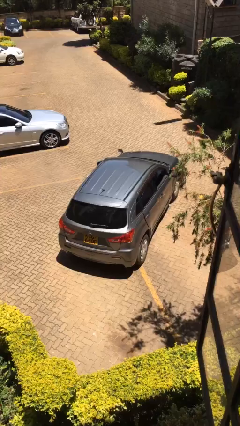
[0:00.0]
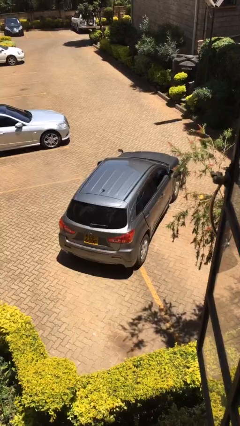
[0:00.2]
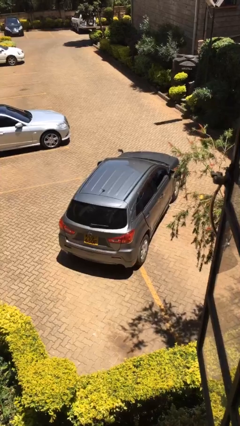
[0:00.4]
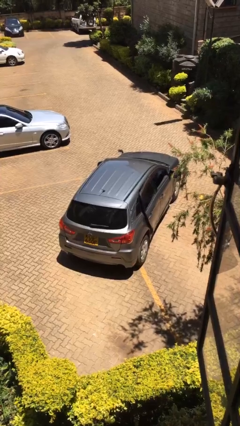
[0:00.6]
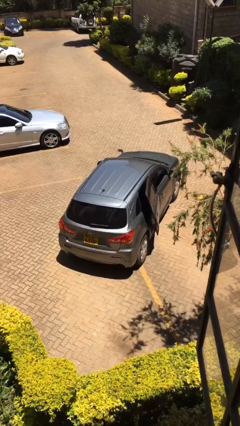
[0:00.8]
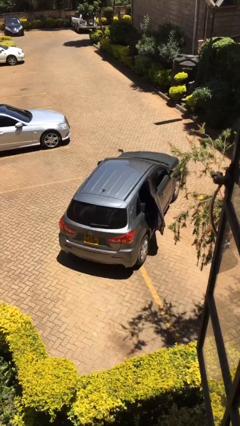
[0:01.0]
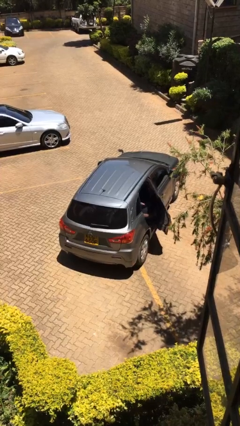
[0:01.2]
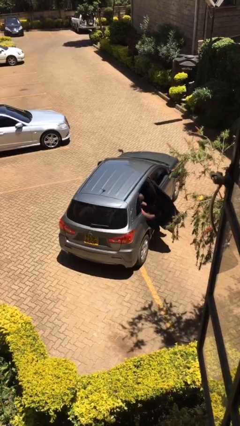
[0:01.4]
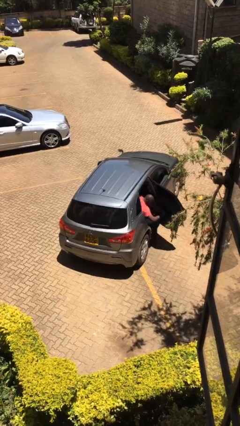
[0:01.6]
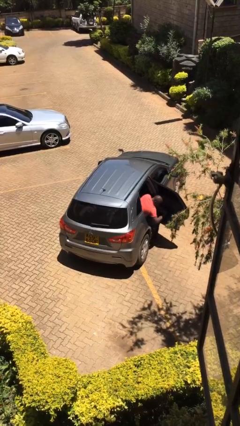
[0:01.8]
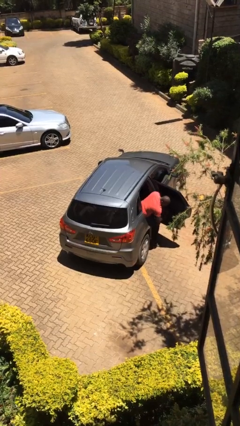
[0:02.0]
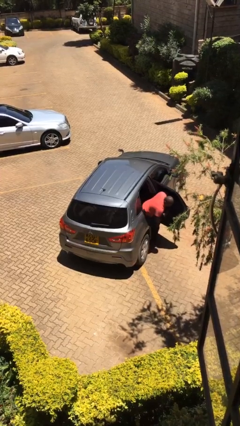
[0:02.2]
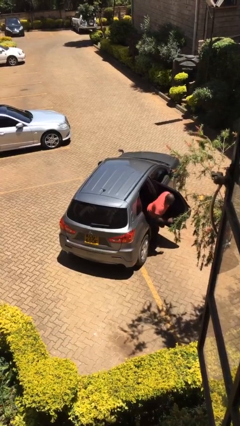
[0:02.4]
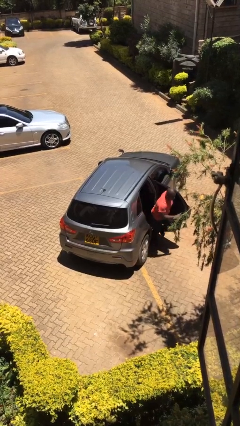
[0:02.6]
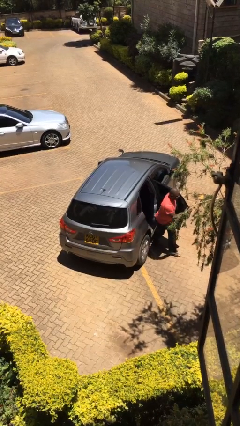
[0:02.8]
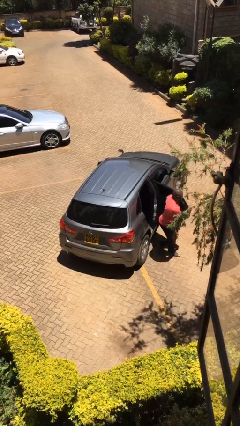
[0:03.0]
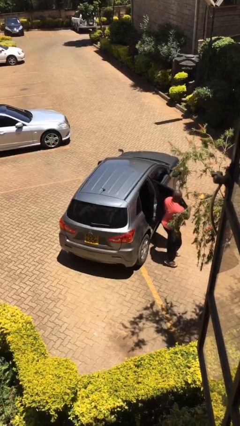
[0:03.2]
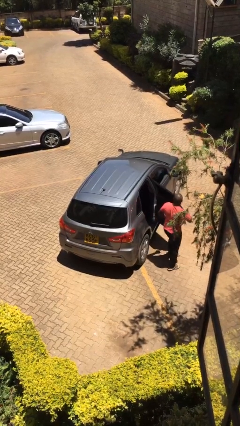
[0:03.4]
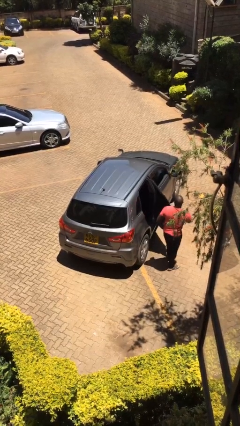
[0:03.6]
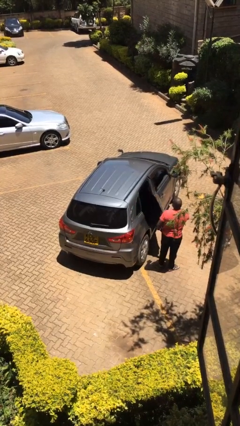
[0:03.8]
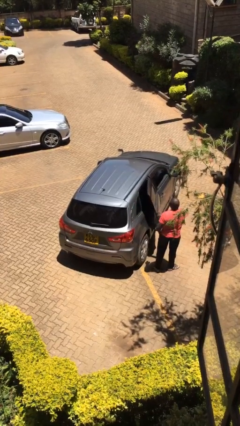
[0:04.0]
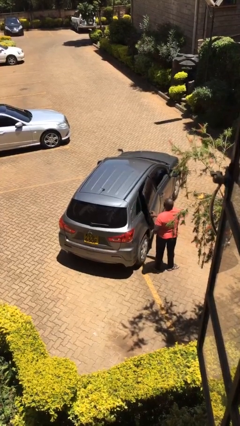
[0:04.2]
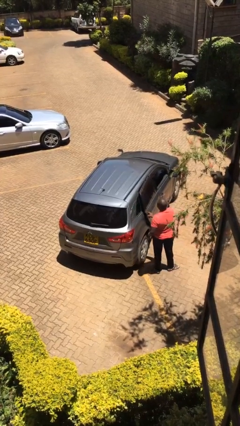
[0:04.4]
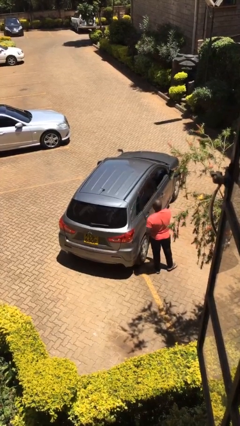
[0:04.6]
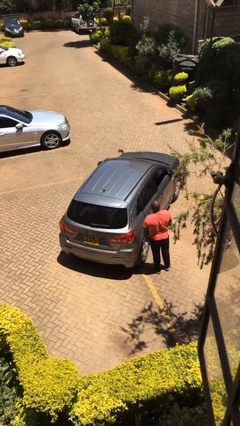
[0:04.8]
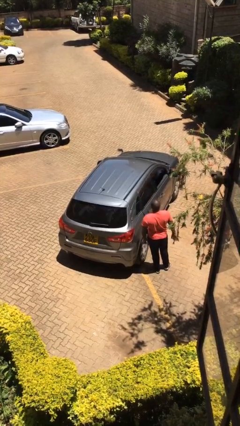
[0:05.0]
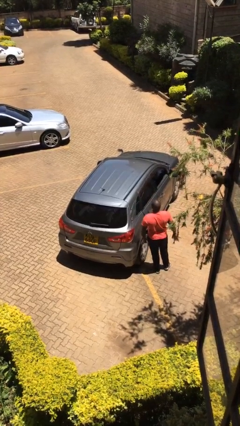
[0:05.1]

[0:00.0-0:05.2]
car drops off person

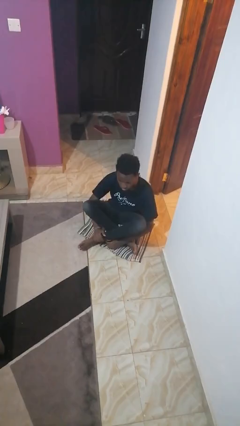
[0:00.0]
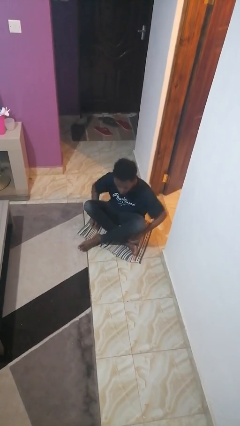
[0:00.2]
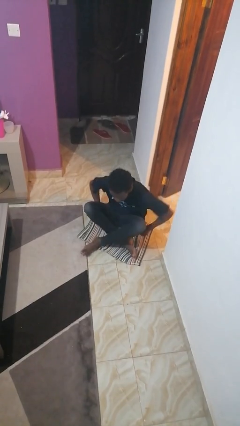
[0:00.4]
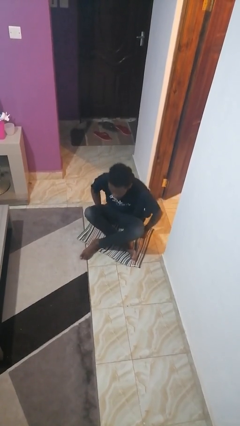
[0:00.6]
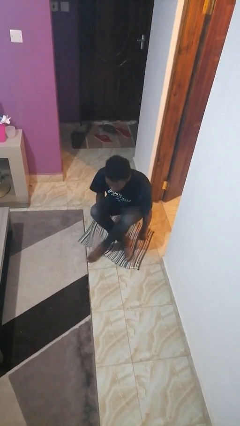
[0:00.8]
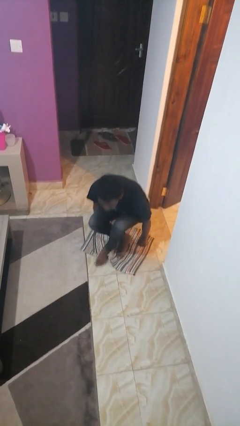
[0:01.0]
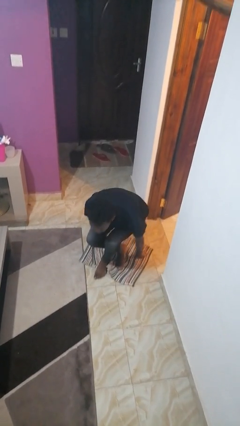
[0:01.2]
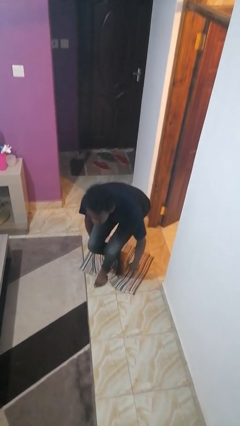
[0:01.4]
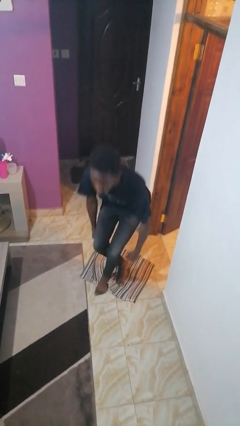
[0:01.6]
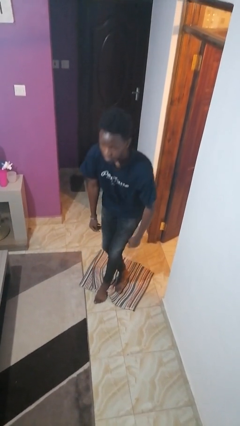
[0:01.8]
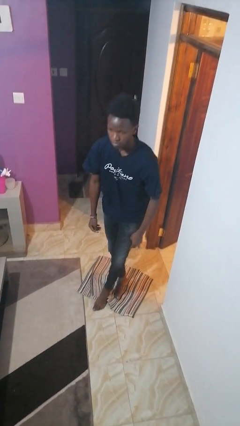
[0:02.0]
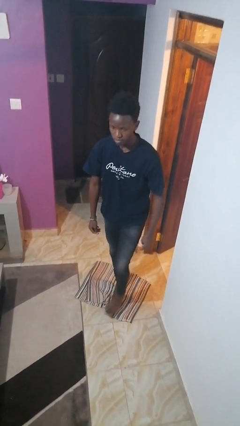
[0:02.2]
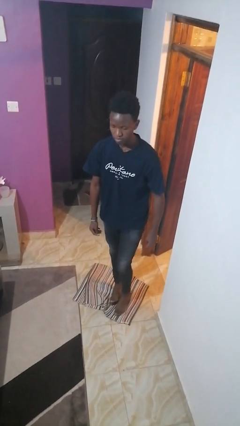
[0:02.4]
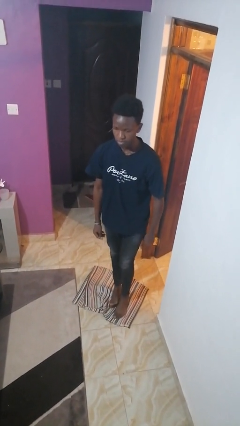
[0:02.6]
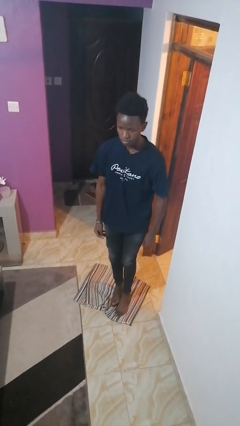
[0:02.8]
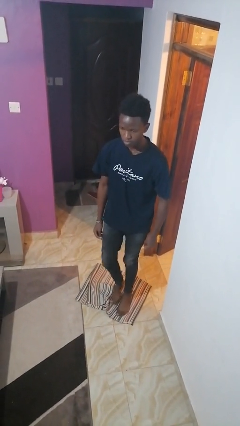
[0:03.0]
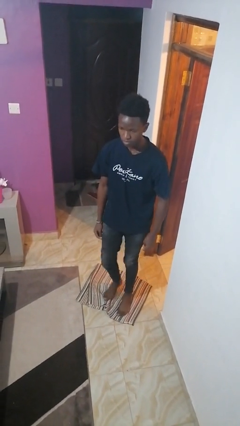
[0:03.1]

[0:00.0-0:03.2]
person stands up from floor

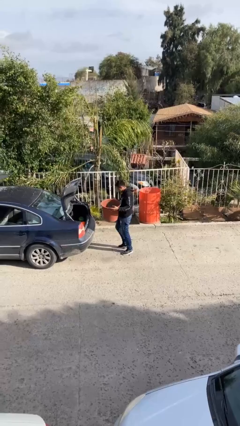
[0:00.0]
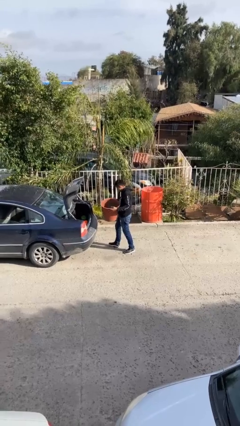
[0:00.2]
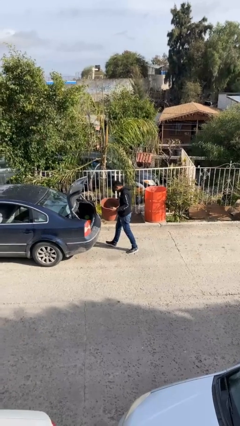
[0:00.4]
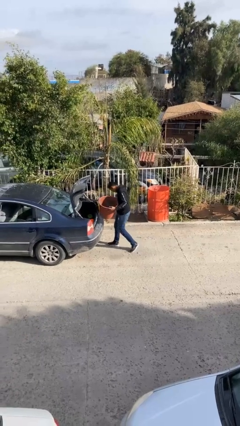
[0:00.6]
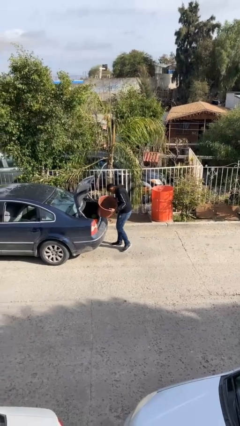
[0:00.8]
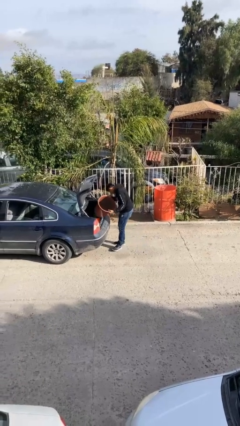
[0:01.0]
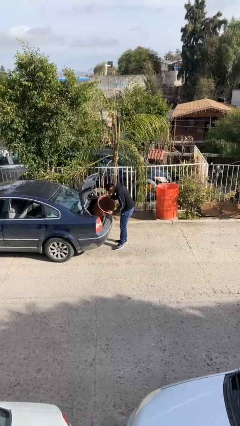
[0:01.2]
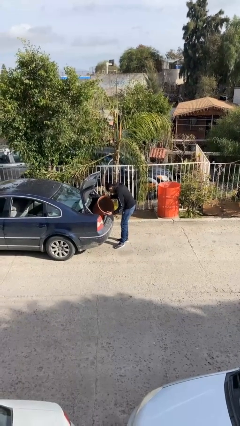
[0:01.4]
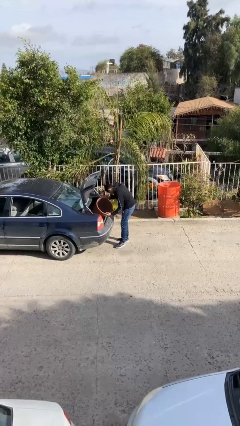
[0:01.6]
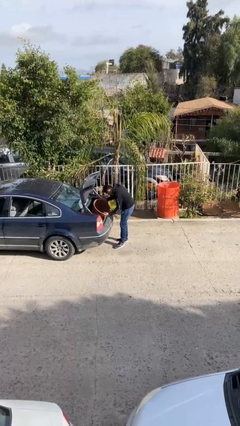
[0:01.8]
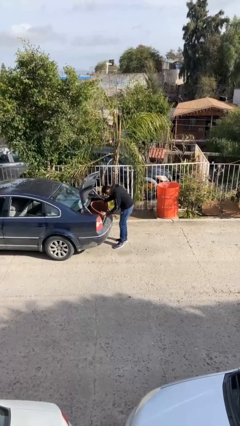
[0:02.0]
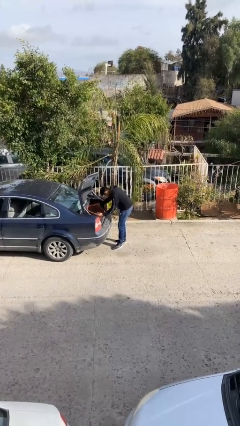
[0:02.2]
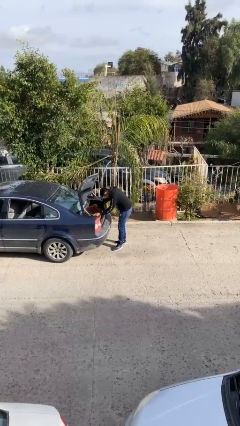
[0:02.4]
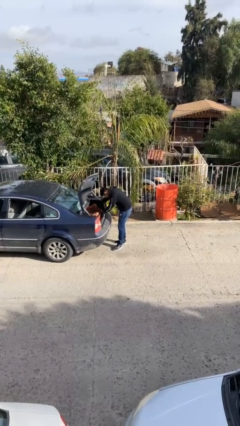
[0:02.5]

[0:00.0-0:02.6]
person loads car

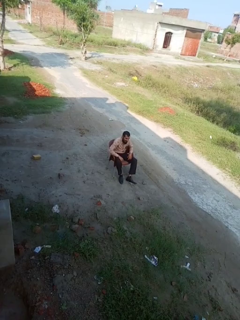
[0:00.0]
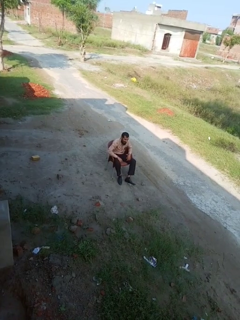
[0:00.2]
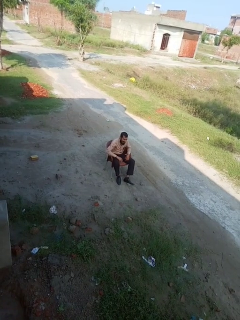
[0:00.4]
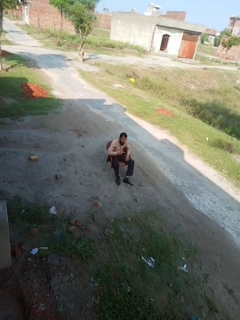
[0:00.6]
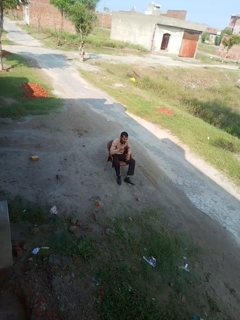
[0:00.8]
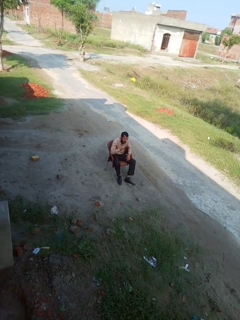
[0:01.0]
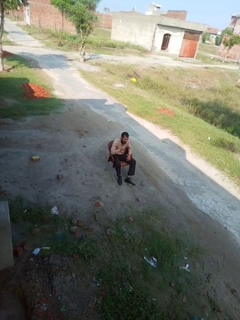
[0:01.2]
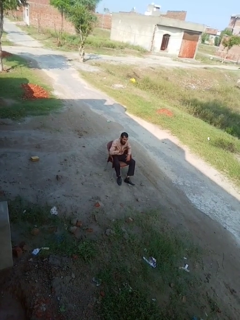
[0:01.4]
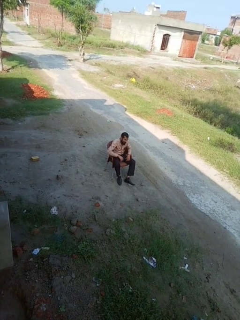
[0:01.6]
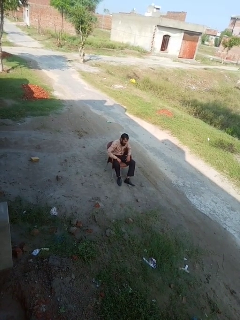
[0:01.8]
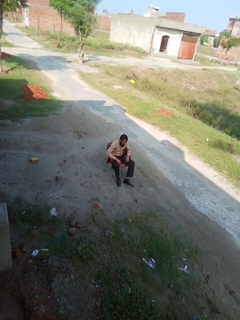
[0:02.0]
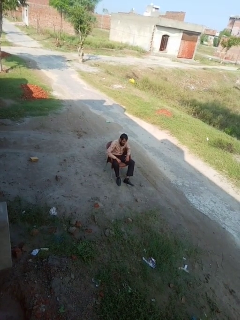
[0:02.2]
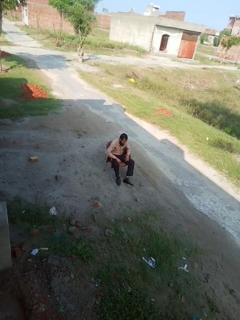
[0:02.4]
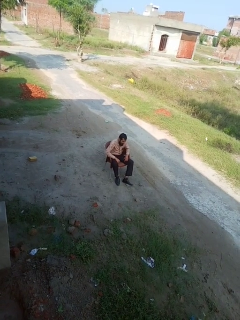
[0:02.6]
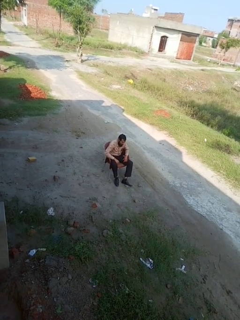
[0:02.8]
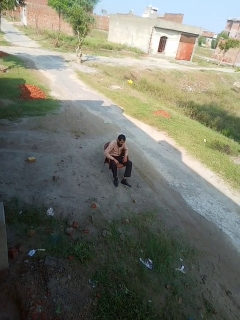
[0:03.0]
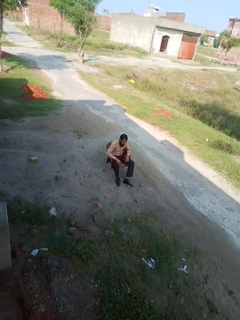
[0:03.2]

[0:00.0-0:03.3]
person gestures number four

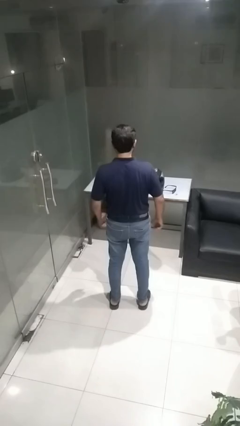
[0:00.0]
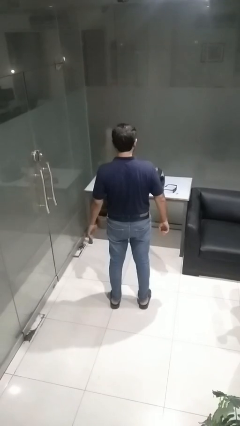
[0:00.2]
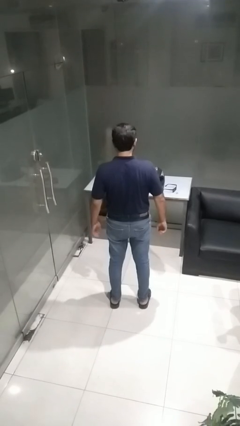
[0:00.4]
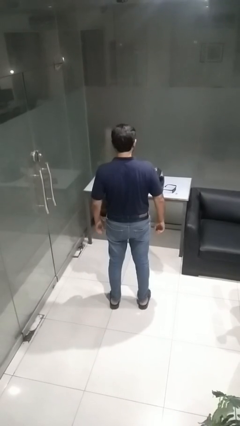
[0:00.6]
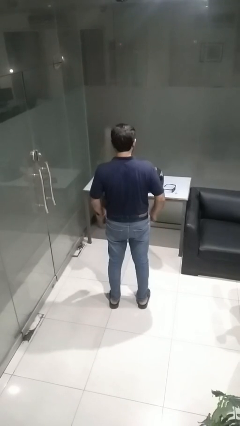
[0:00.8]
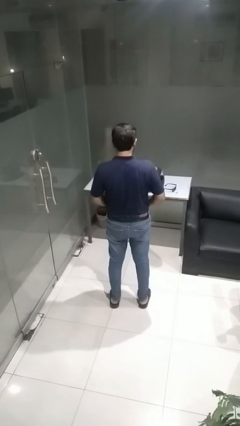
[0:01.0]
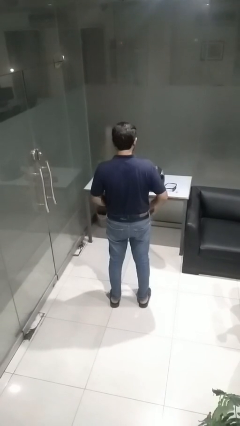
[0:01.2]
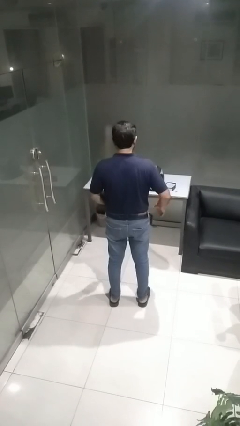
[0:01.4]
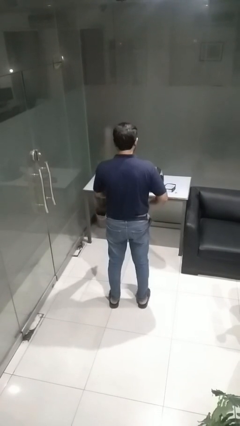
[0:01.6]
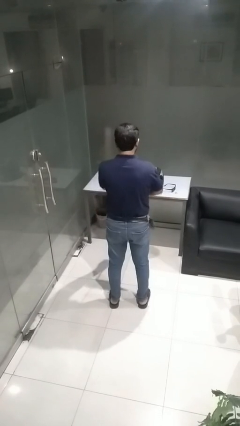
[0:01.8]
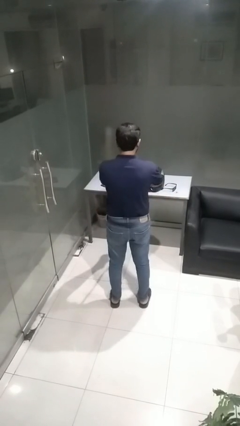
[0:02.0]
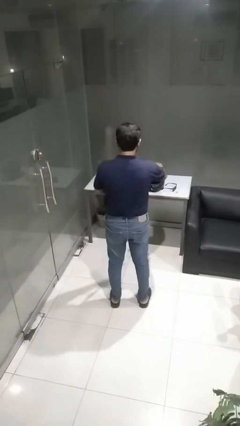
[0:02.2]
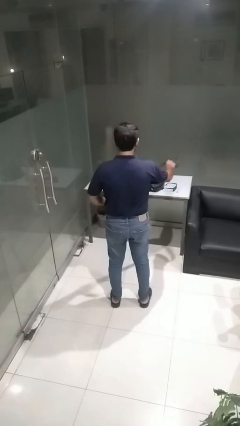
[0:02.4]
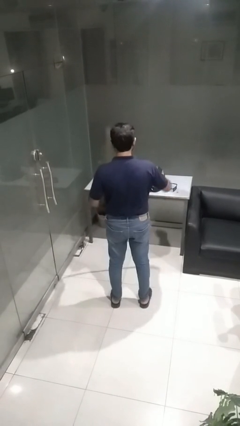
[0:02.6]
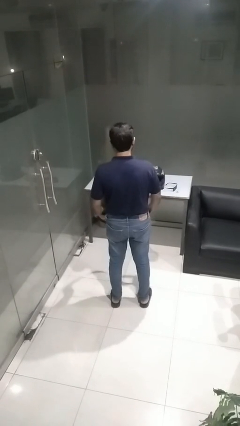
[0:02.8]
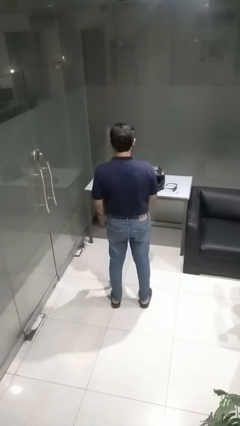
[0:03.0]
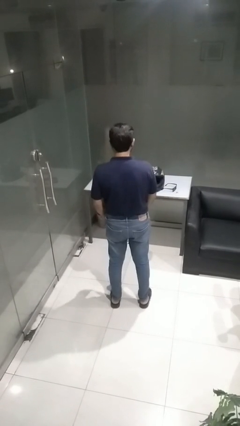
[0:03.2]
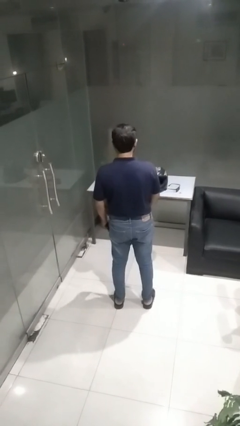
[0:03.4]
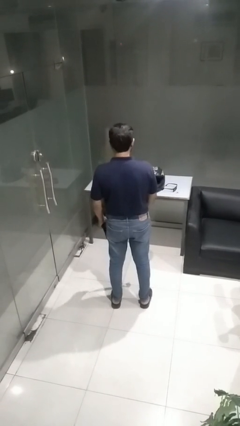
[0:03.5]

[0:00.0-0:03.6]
person takes off belt

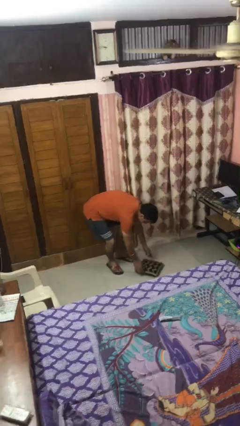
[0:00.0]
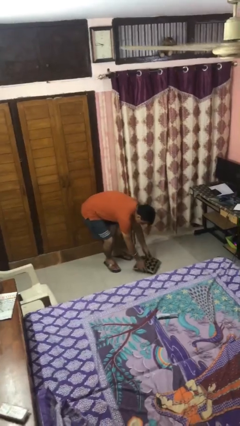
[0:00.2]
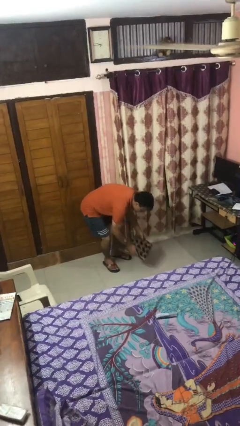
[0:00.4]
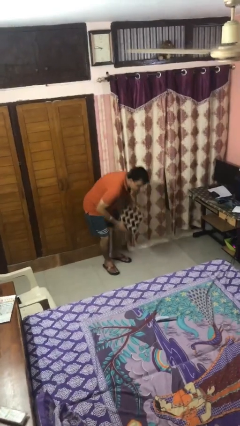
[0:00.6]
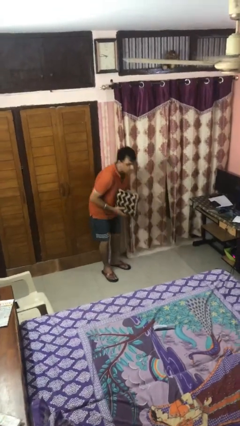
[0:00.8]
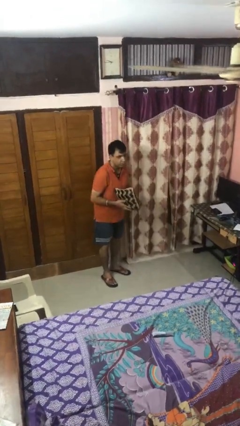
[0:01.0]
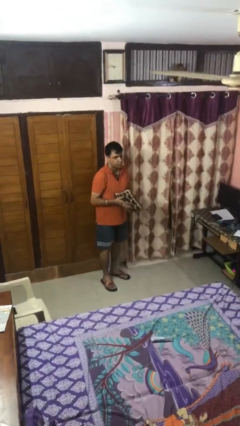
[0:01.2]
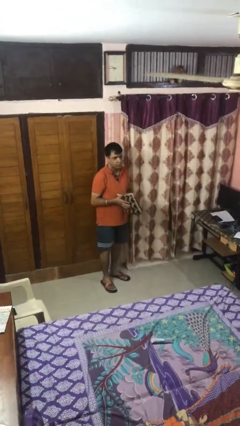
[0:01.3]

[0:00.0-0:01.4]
person picks up object from floor
